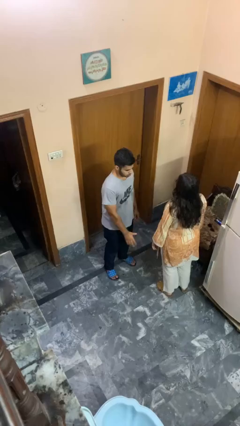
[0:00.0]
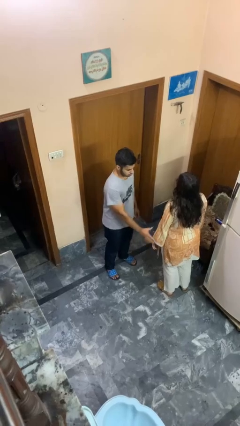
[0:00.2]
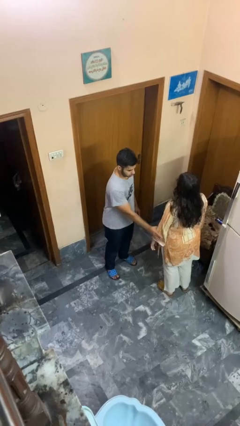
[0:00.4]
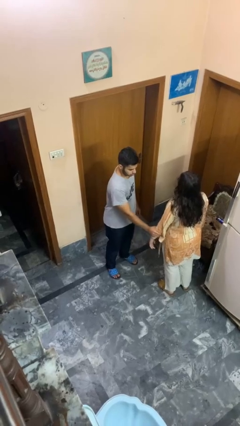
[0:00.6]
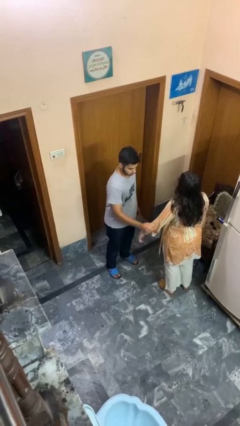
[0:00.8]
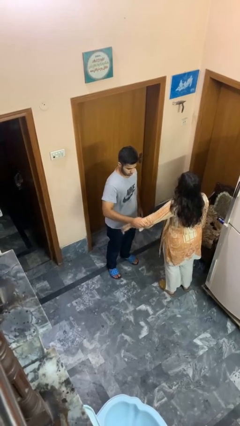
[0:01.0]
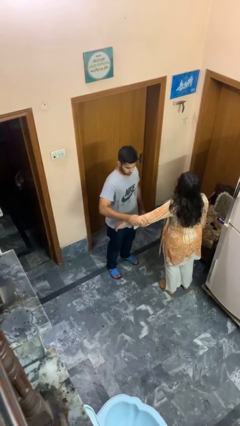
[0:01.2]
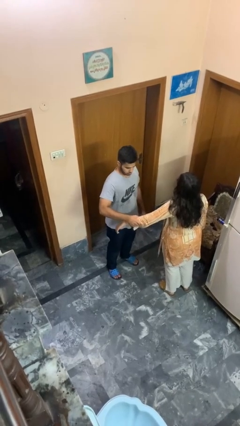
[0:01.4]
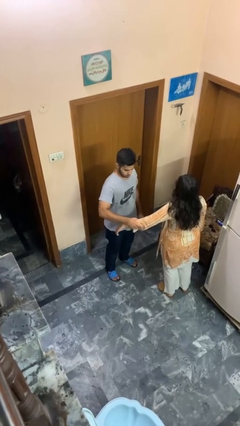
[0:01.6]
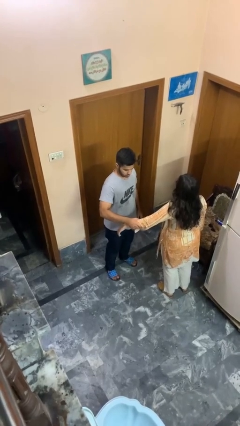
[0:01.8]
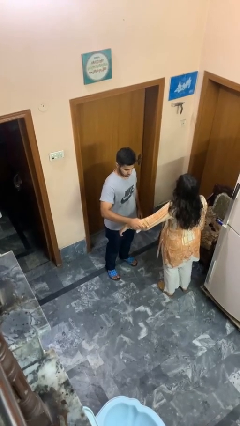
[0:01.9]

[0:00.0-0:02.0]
person grabs person by forearm

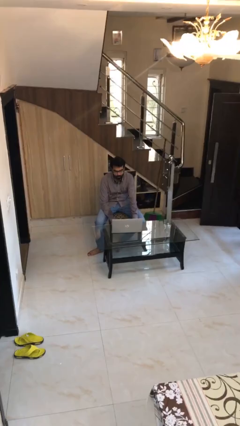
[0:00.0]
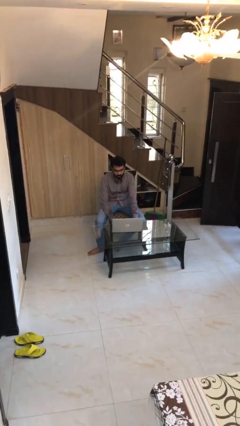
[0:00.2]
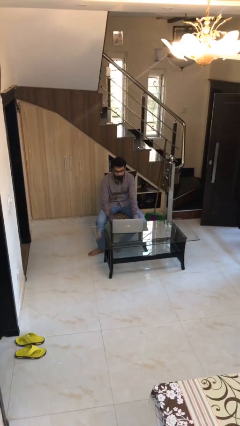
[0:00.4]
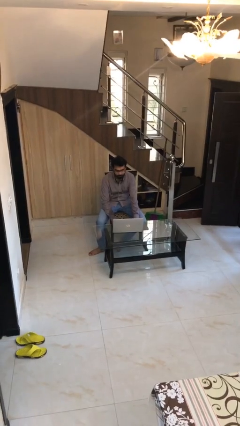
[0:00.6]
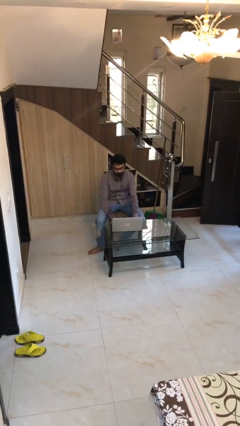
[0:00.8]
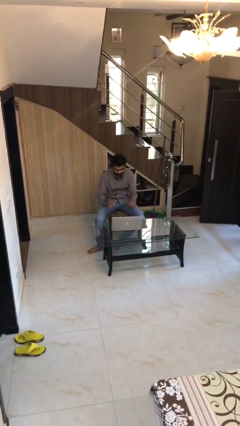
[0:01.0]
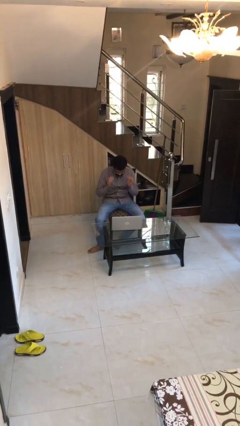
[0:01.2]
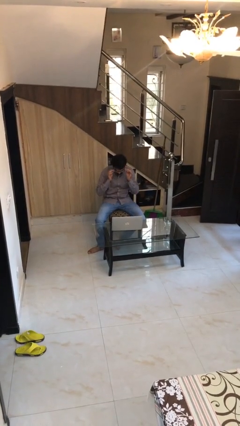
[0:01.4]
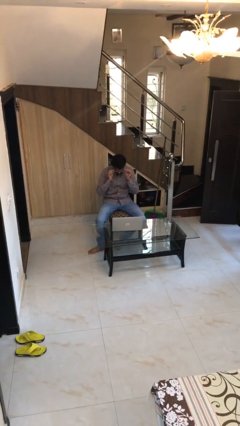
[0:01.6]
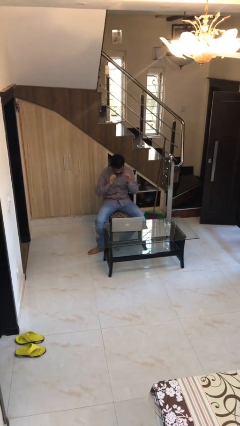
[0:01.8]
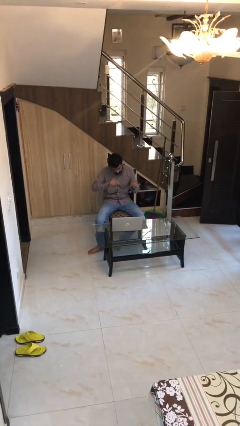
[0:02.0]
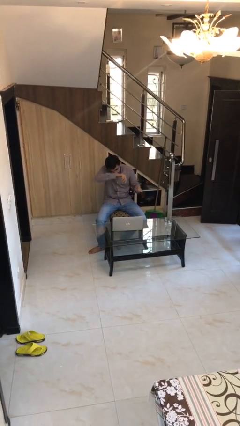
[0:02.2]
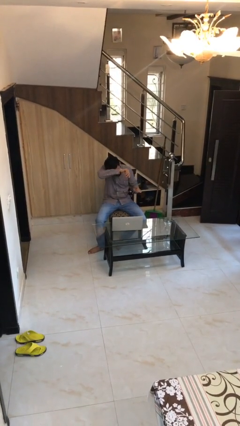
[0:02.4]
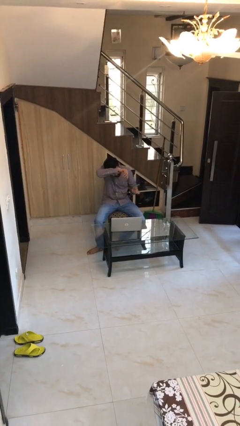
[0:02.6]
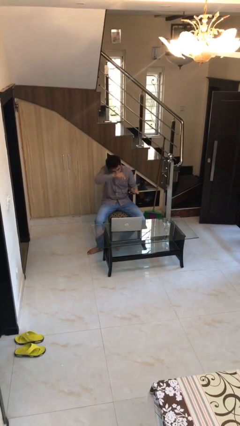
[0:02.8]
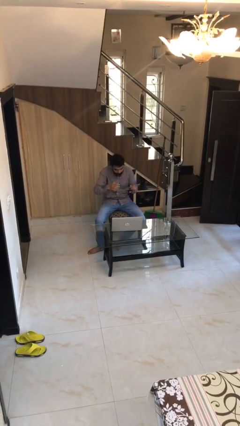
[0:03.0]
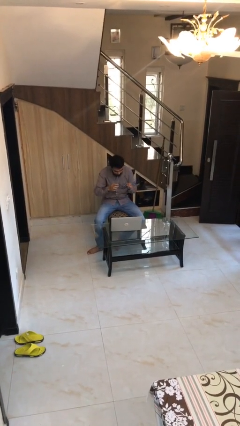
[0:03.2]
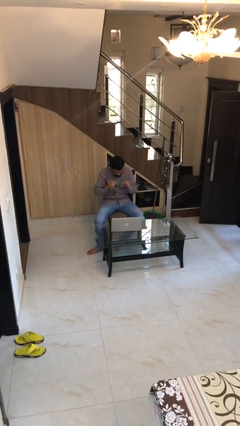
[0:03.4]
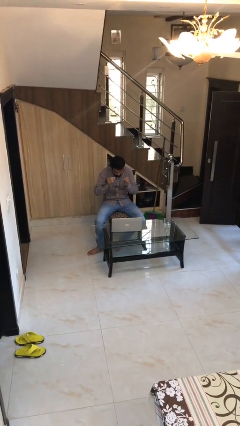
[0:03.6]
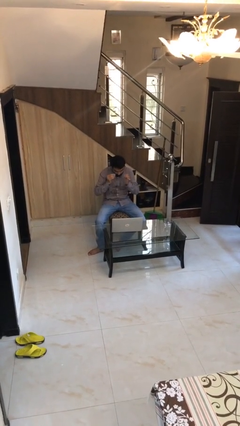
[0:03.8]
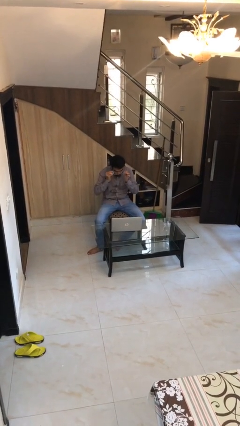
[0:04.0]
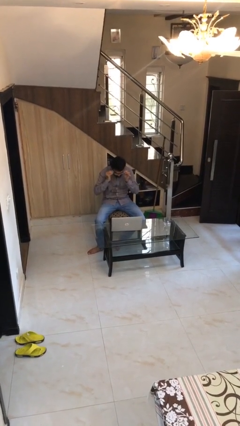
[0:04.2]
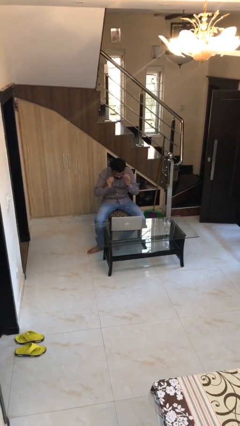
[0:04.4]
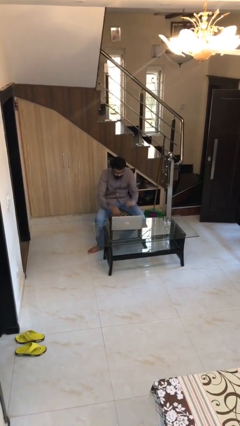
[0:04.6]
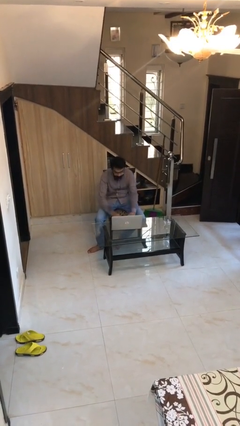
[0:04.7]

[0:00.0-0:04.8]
person interacts with laptop

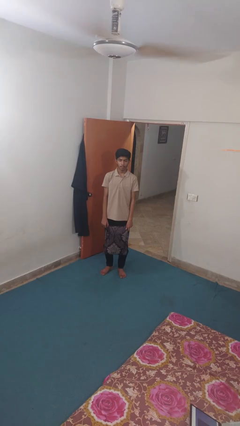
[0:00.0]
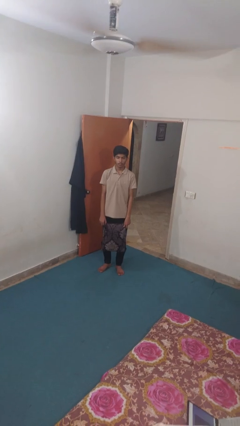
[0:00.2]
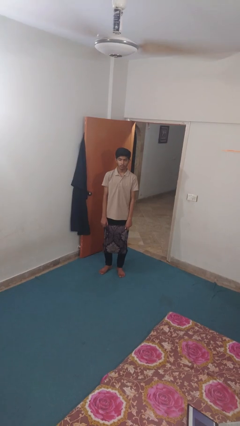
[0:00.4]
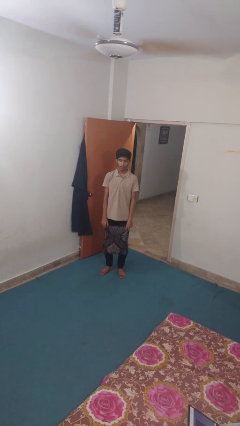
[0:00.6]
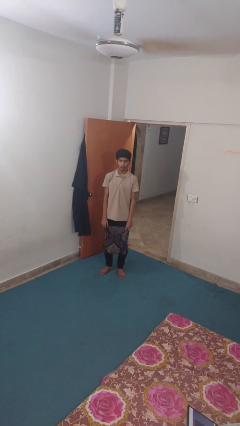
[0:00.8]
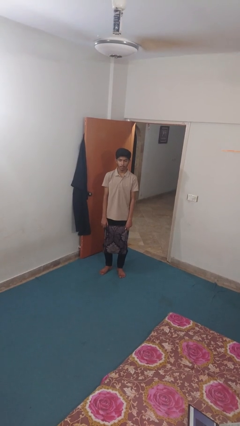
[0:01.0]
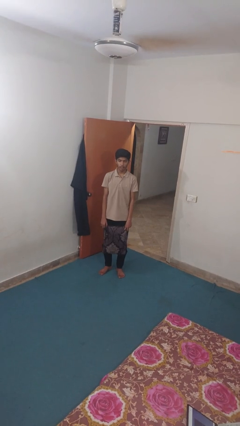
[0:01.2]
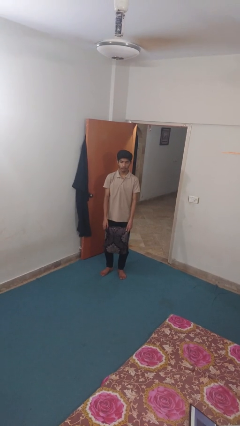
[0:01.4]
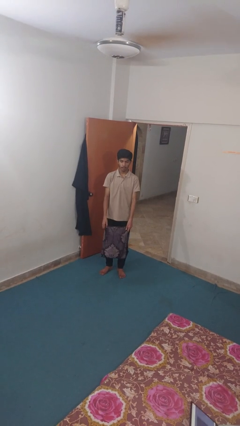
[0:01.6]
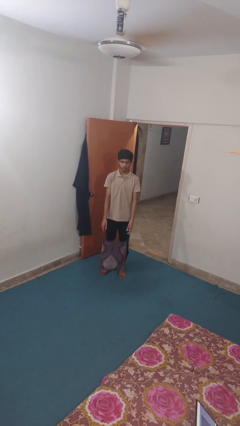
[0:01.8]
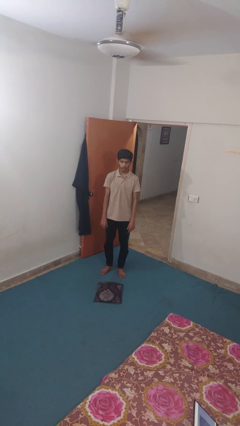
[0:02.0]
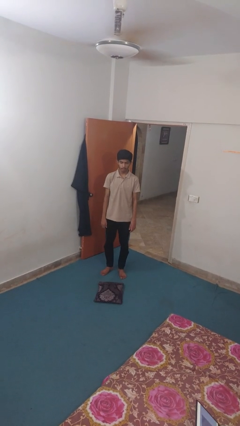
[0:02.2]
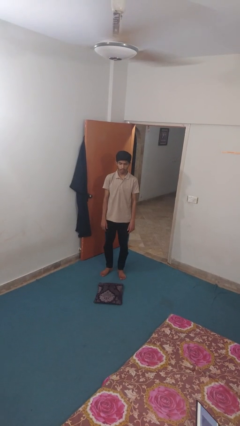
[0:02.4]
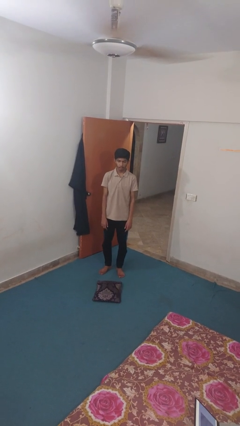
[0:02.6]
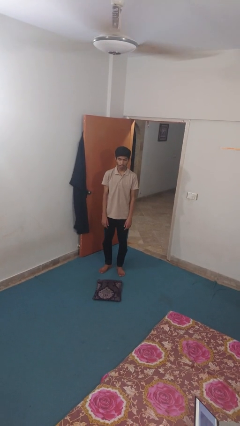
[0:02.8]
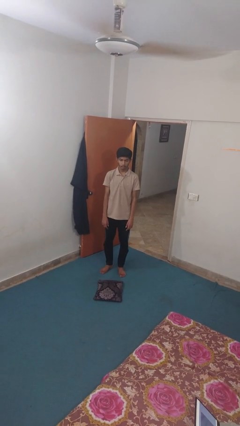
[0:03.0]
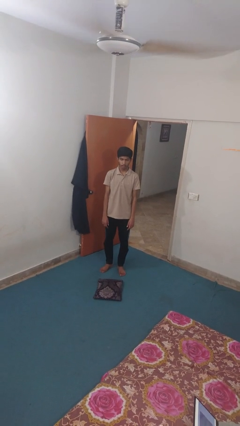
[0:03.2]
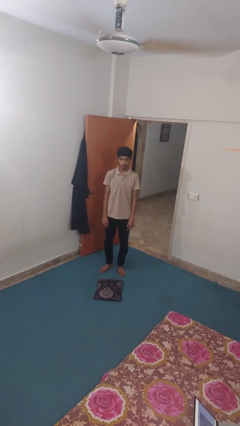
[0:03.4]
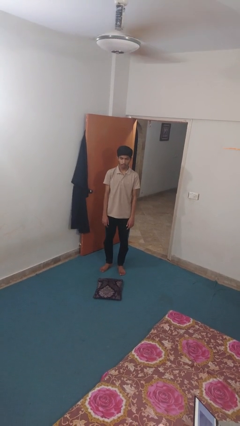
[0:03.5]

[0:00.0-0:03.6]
person drops object

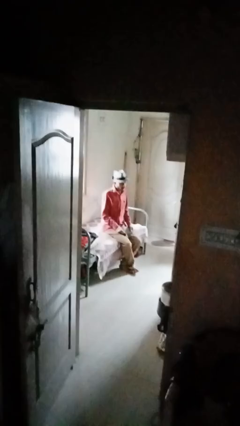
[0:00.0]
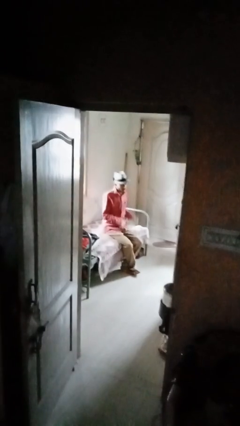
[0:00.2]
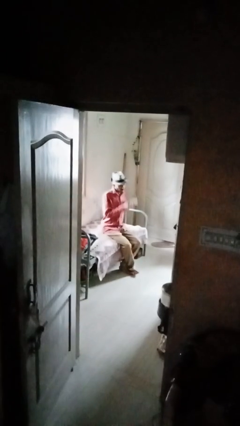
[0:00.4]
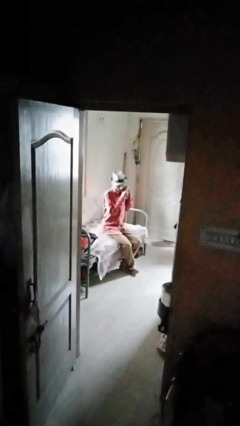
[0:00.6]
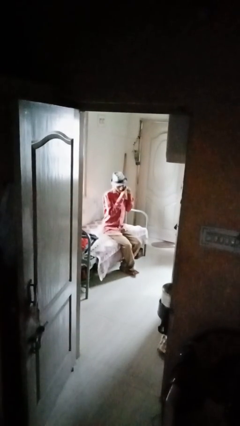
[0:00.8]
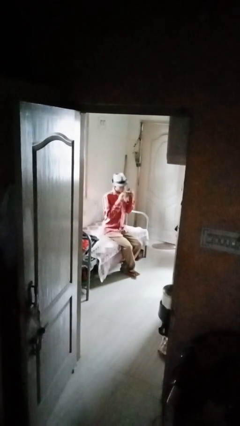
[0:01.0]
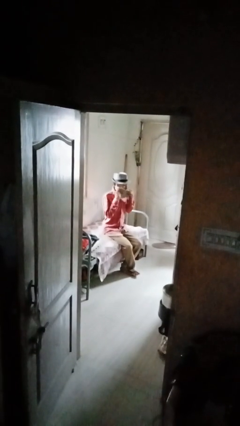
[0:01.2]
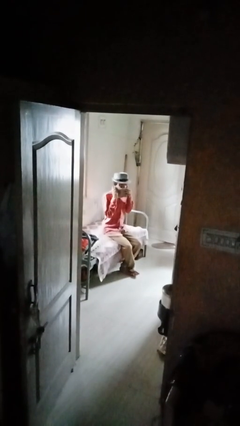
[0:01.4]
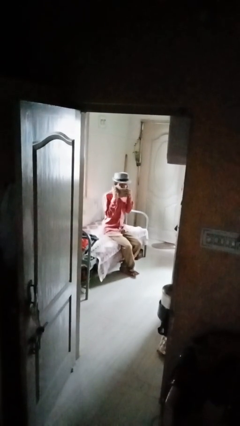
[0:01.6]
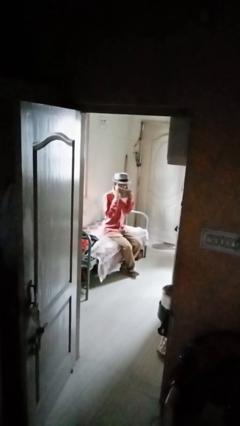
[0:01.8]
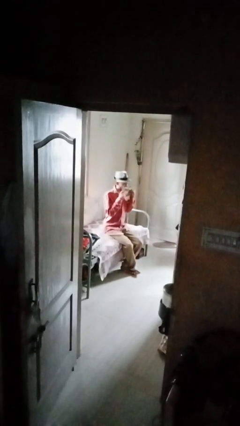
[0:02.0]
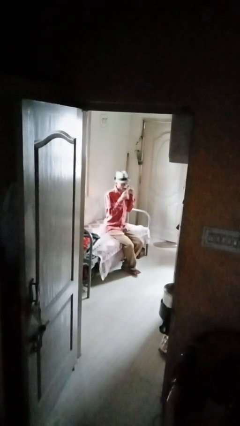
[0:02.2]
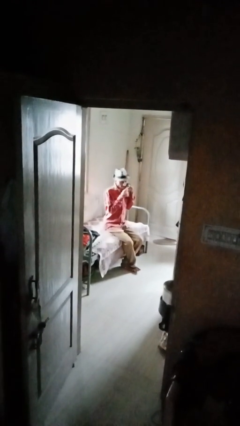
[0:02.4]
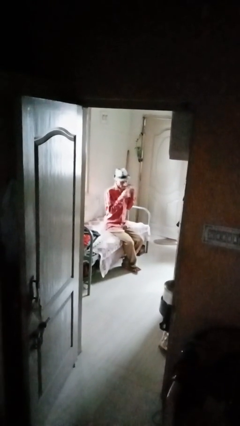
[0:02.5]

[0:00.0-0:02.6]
person wipes mouth with napkin

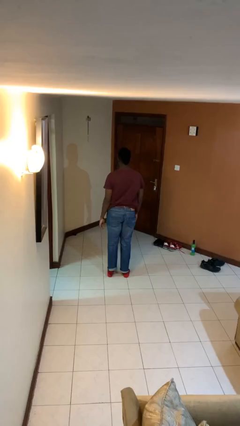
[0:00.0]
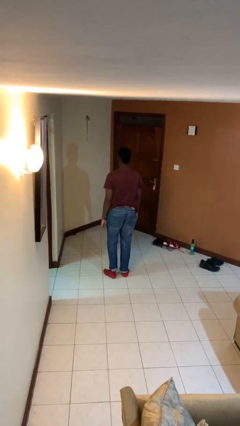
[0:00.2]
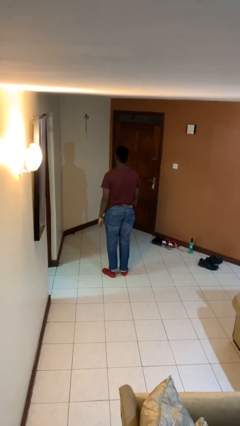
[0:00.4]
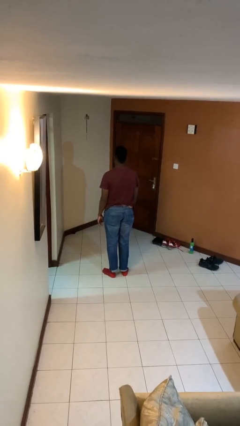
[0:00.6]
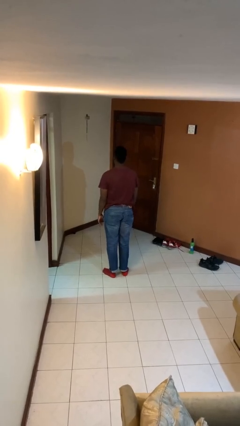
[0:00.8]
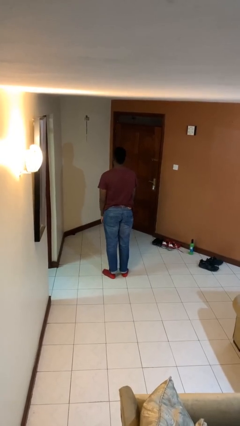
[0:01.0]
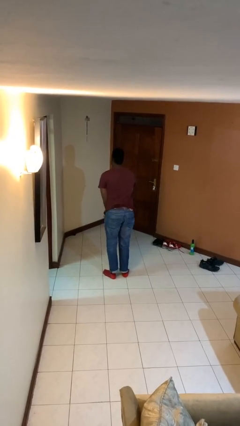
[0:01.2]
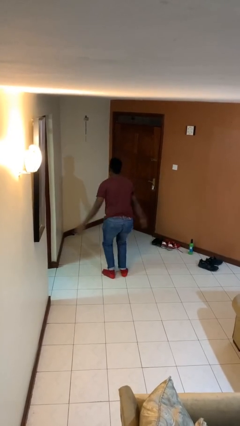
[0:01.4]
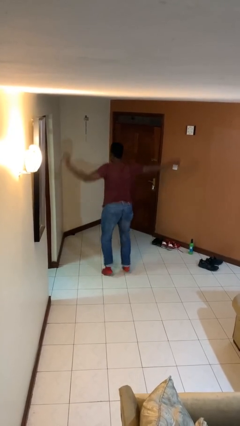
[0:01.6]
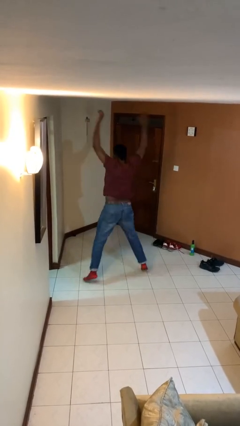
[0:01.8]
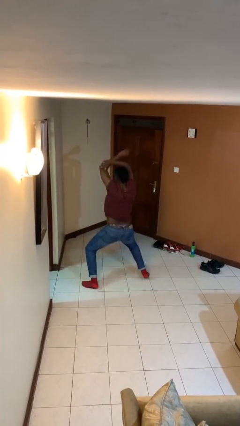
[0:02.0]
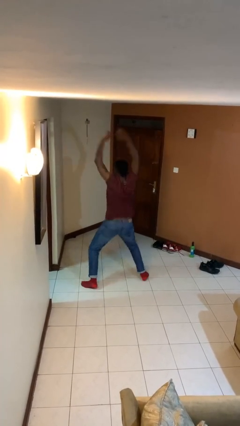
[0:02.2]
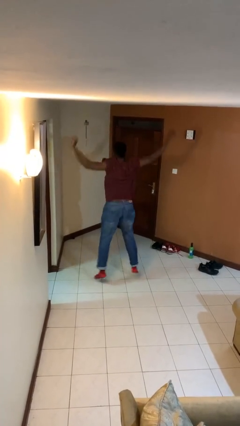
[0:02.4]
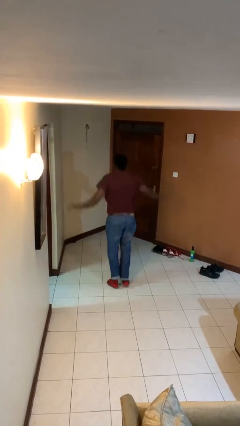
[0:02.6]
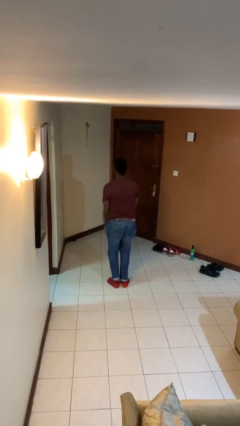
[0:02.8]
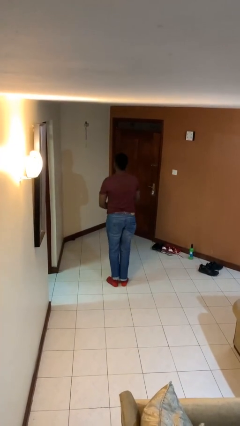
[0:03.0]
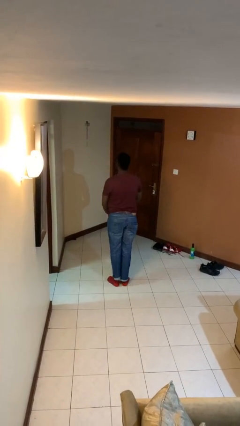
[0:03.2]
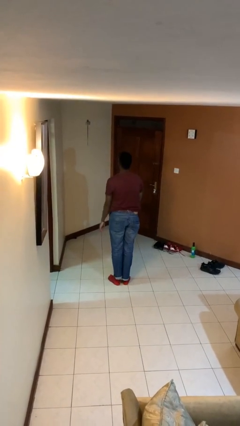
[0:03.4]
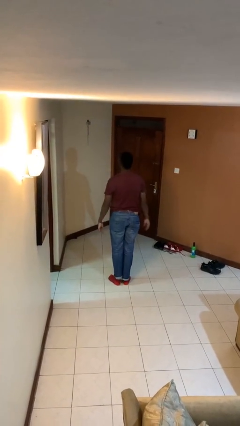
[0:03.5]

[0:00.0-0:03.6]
person exercises with jumping jacks

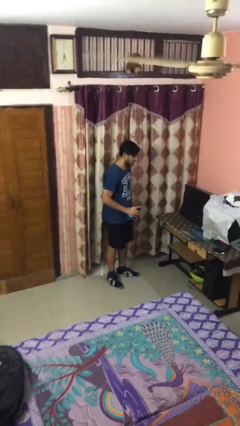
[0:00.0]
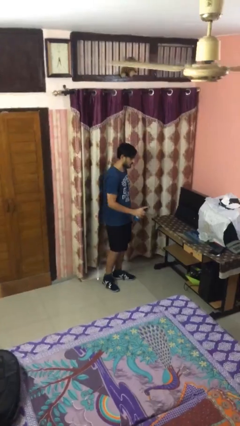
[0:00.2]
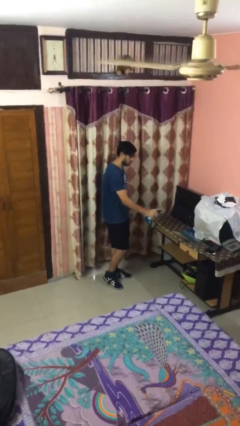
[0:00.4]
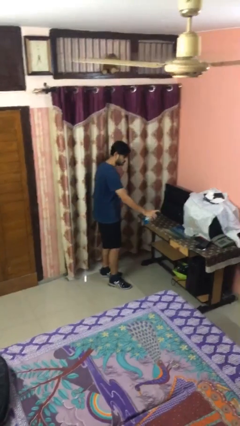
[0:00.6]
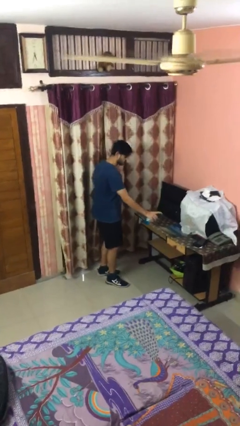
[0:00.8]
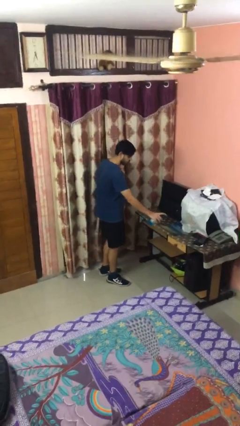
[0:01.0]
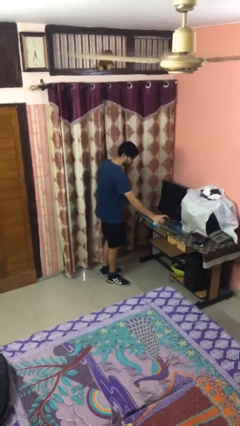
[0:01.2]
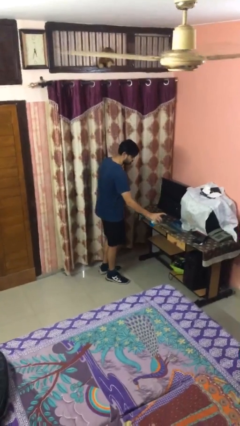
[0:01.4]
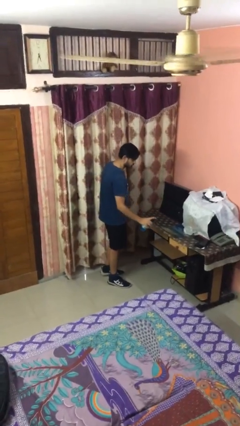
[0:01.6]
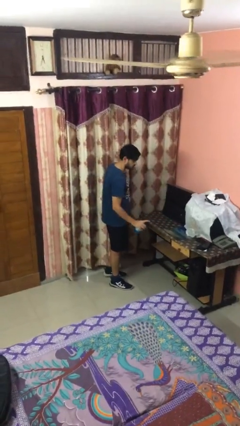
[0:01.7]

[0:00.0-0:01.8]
person sprays from bottle
